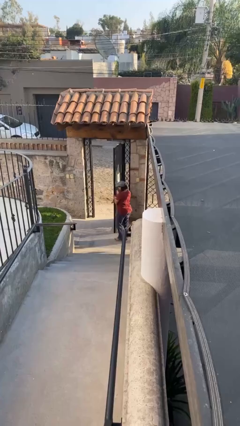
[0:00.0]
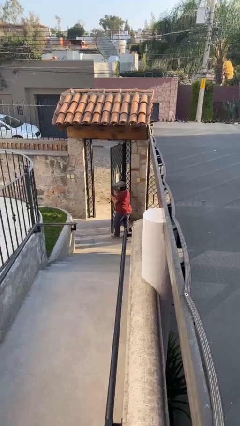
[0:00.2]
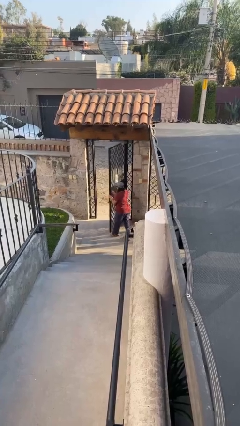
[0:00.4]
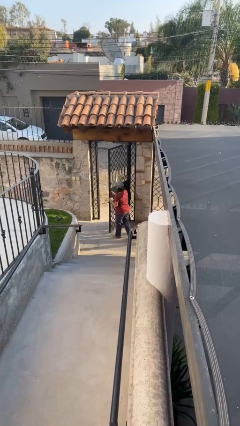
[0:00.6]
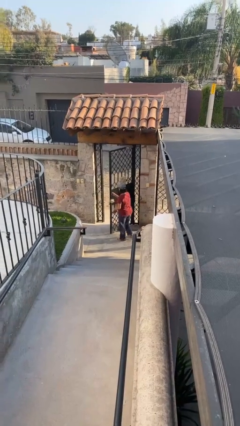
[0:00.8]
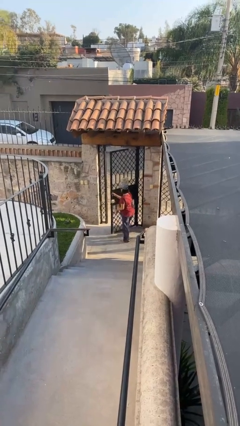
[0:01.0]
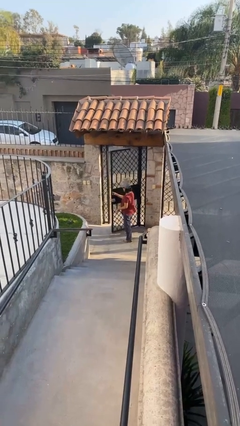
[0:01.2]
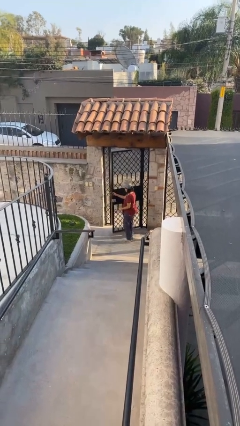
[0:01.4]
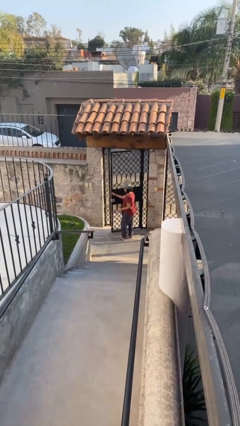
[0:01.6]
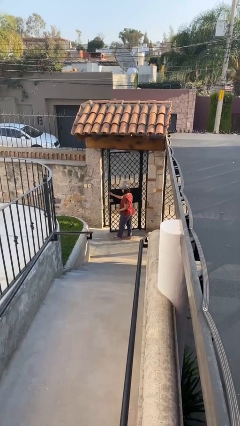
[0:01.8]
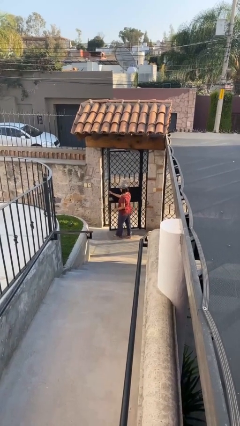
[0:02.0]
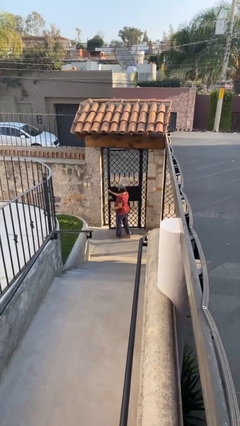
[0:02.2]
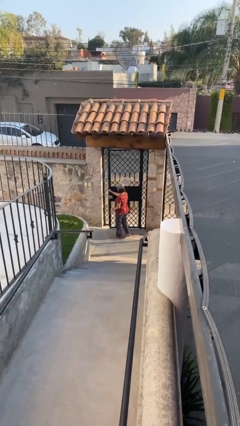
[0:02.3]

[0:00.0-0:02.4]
person closes facility door

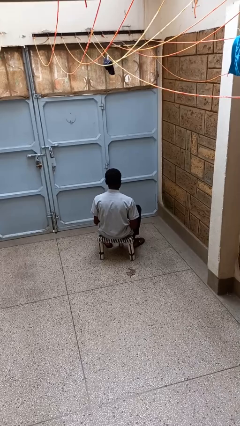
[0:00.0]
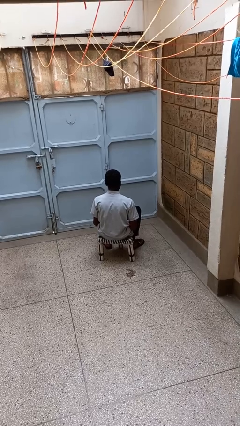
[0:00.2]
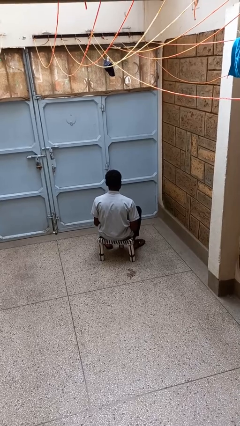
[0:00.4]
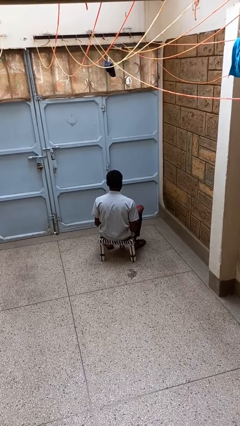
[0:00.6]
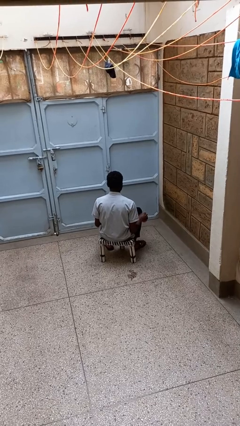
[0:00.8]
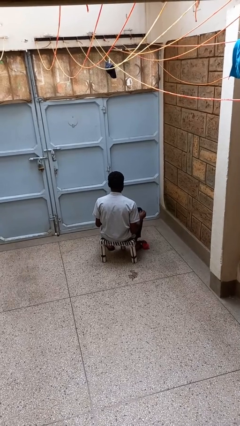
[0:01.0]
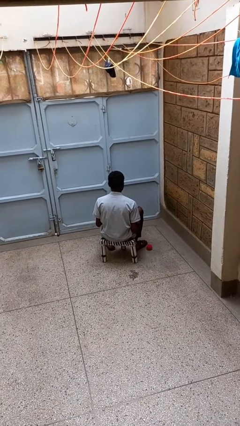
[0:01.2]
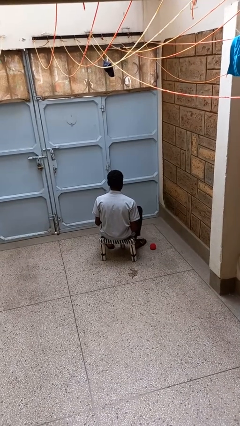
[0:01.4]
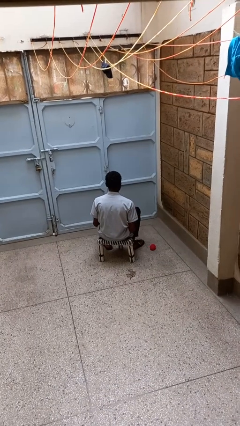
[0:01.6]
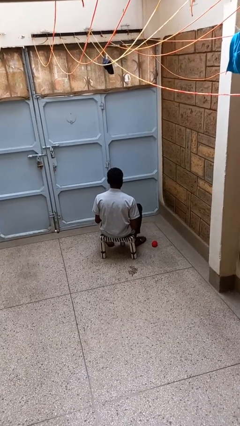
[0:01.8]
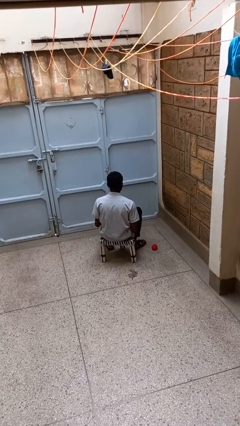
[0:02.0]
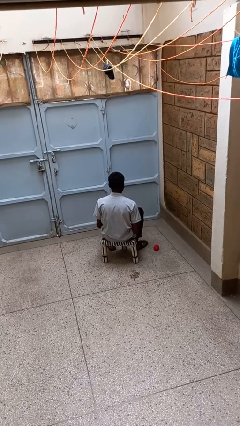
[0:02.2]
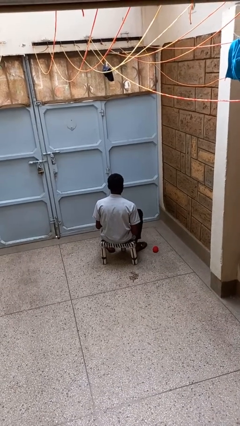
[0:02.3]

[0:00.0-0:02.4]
person drops object

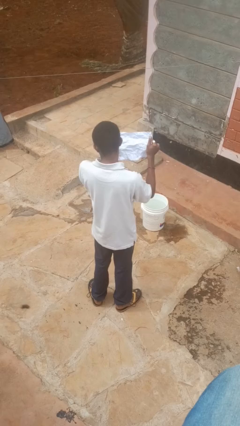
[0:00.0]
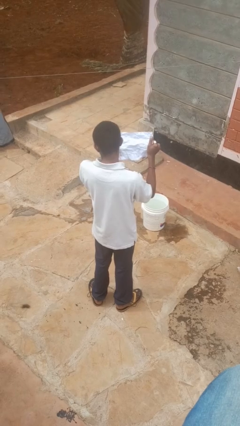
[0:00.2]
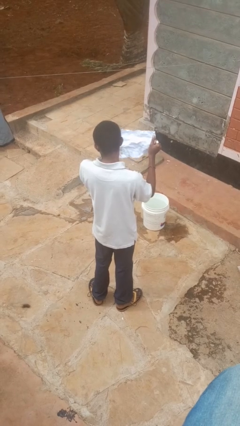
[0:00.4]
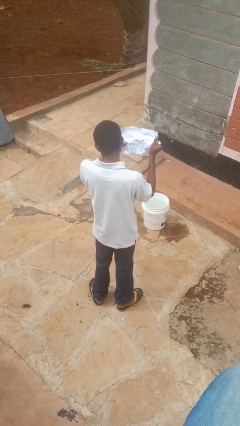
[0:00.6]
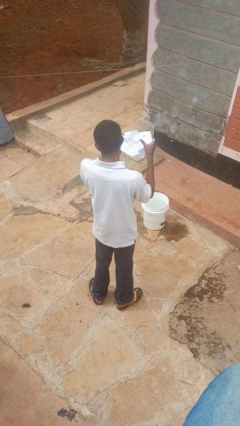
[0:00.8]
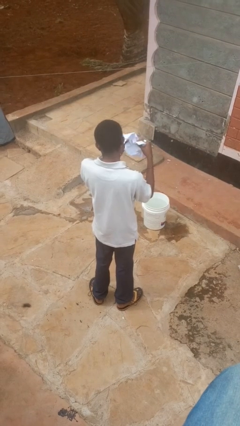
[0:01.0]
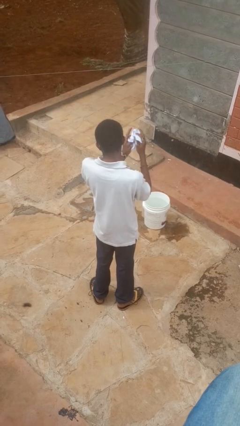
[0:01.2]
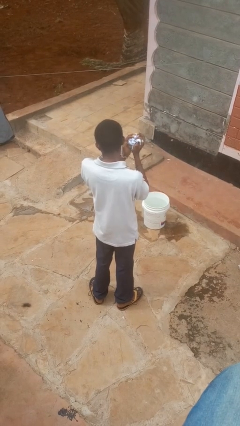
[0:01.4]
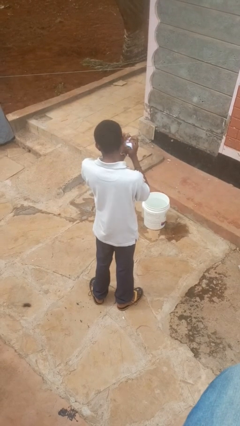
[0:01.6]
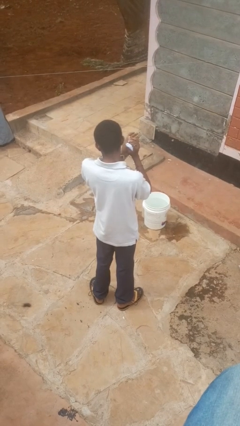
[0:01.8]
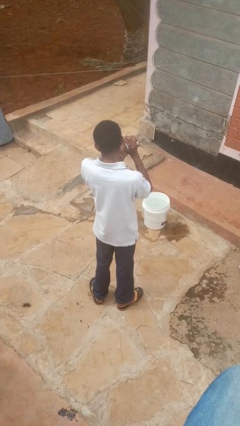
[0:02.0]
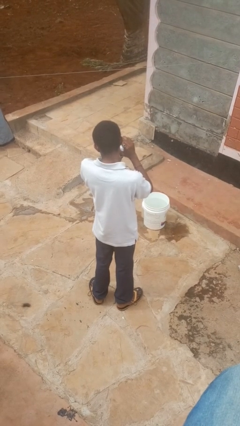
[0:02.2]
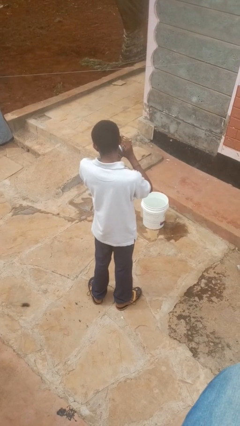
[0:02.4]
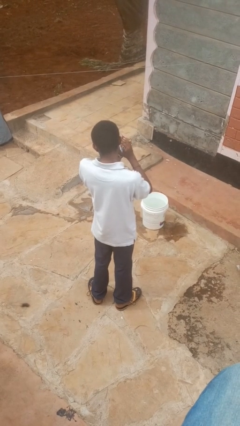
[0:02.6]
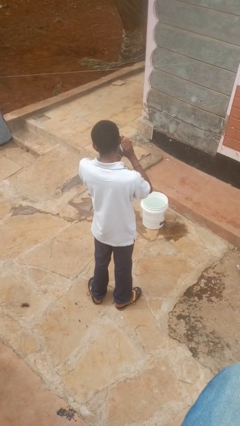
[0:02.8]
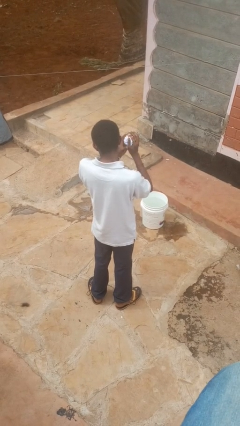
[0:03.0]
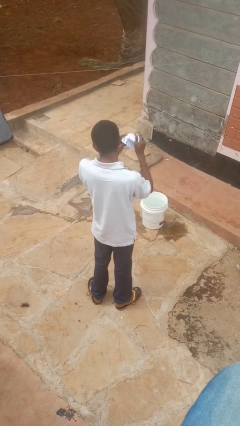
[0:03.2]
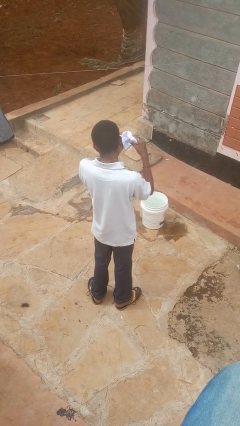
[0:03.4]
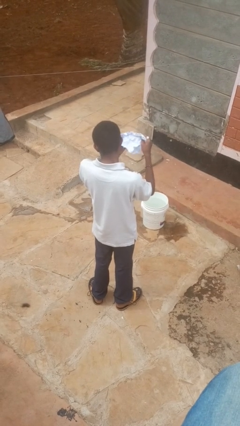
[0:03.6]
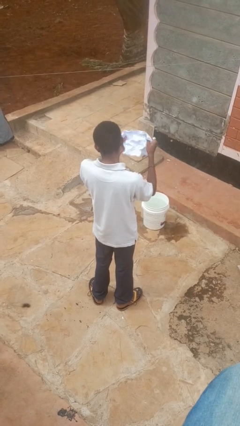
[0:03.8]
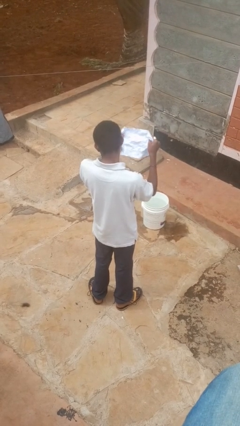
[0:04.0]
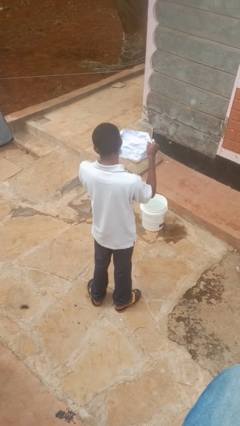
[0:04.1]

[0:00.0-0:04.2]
person crumples paper

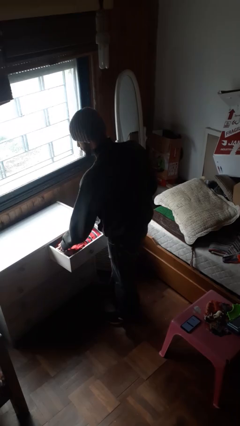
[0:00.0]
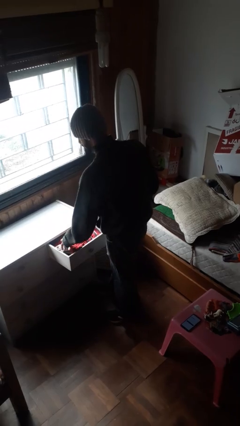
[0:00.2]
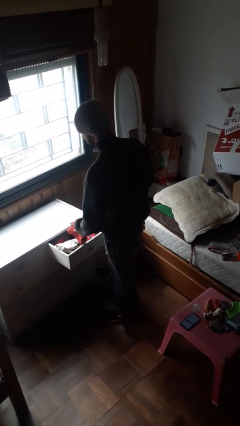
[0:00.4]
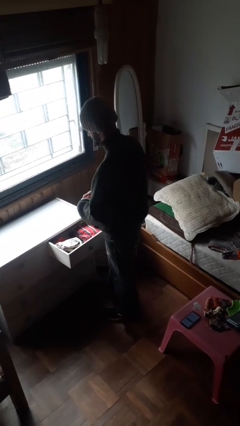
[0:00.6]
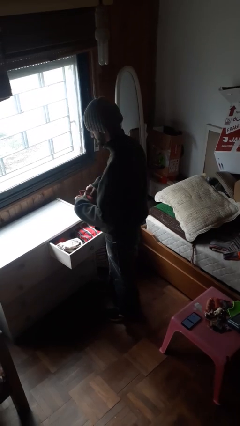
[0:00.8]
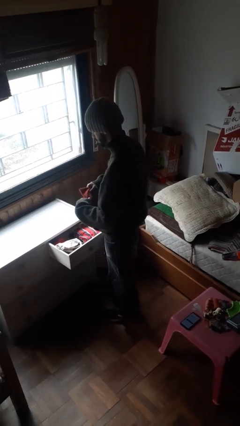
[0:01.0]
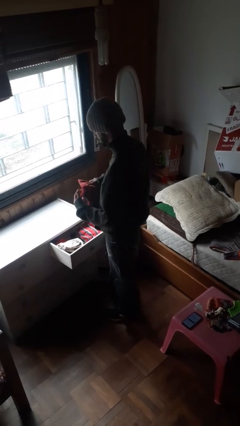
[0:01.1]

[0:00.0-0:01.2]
person takes clothes from dresser

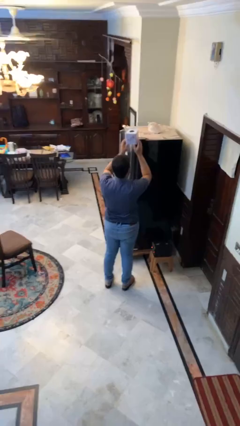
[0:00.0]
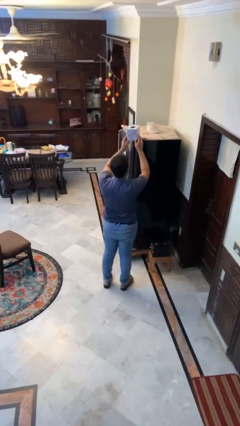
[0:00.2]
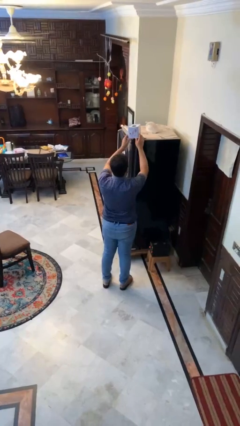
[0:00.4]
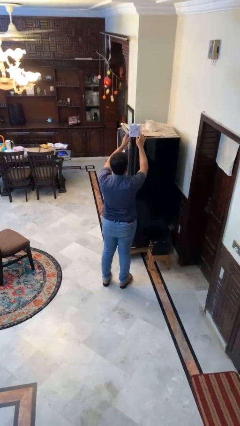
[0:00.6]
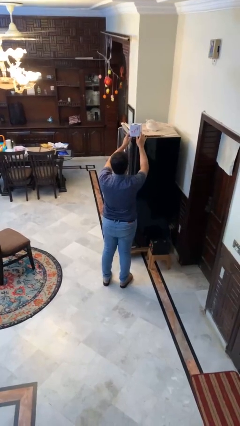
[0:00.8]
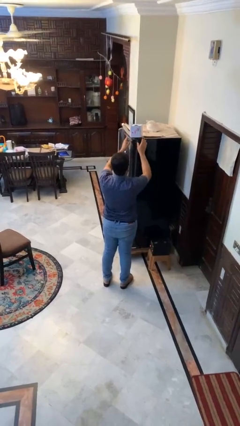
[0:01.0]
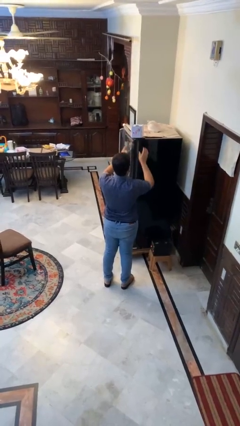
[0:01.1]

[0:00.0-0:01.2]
person puts down object on shelf

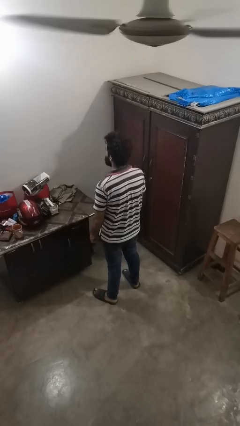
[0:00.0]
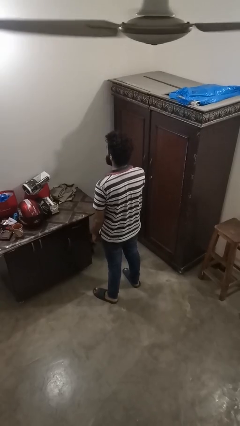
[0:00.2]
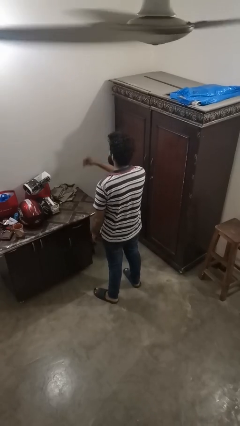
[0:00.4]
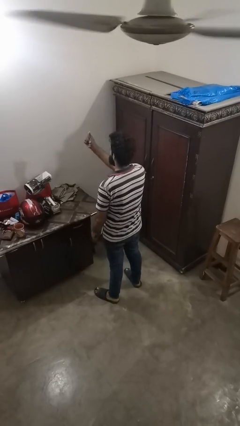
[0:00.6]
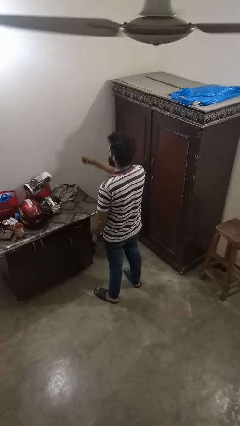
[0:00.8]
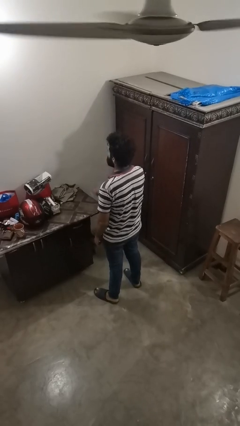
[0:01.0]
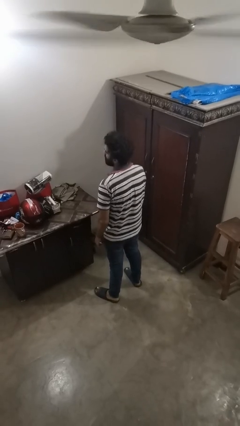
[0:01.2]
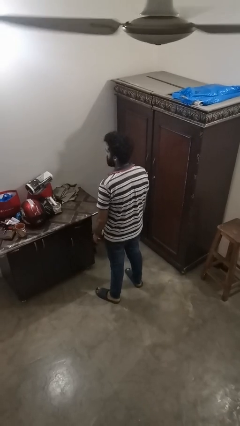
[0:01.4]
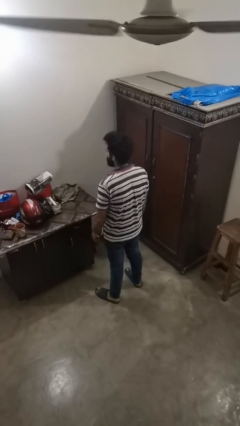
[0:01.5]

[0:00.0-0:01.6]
person snaps fingers

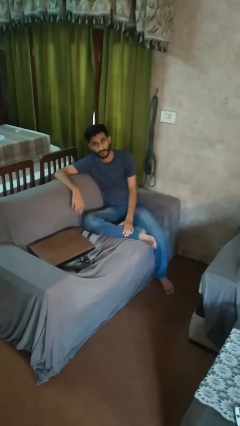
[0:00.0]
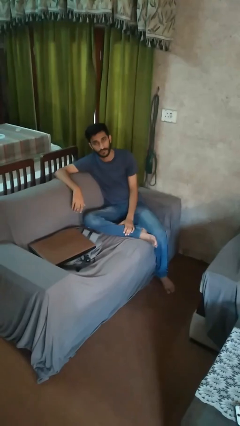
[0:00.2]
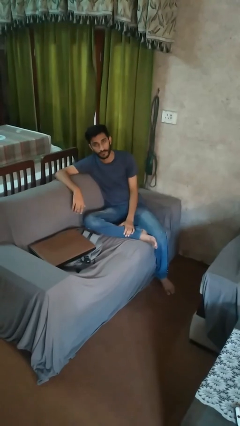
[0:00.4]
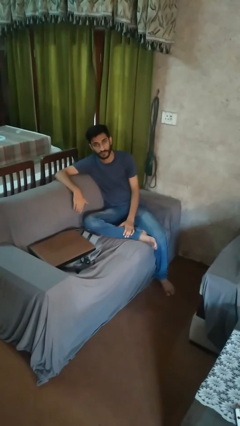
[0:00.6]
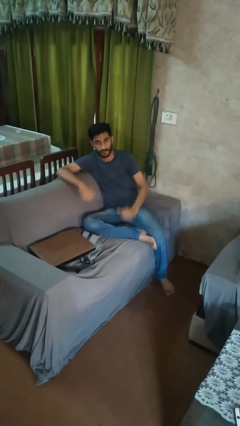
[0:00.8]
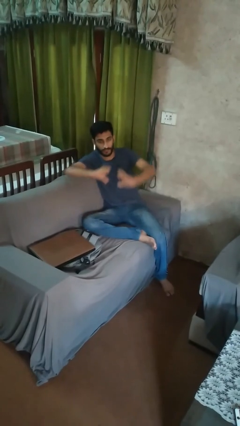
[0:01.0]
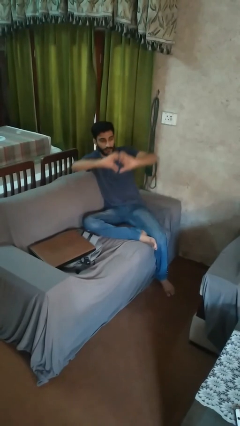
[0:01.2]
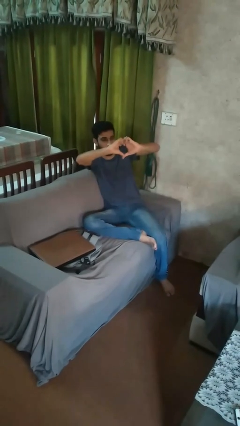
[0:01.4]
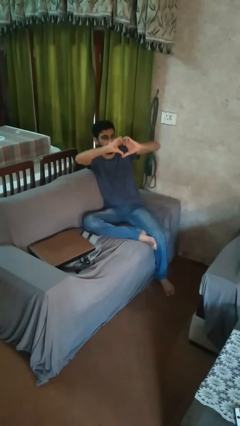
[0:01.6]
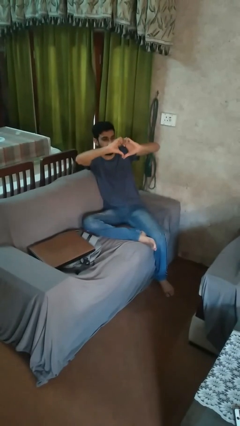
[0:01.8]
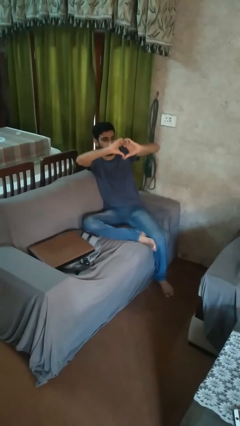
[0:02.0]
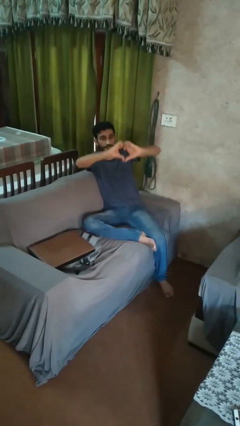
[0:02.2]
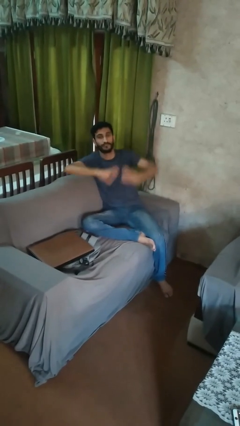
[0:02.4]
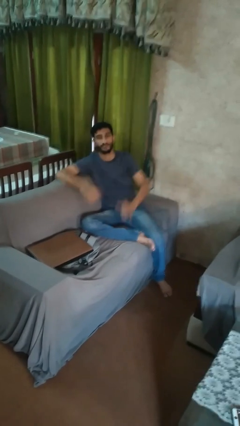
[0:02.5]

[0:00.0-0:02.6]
person gestures heart

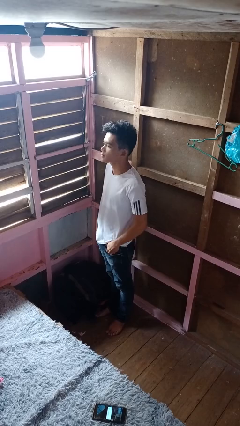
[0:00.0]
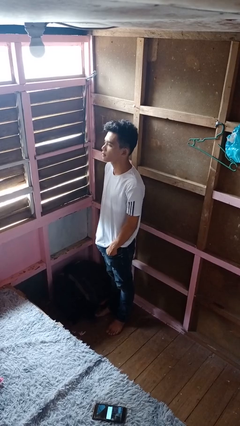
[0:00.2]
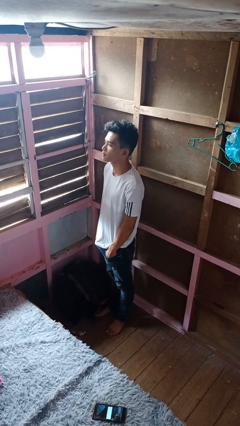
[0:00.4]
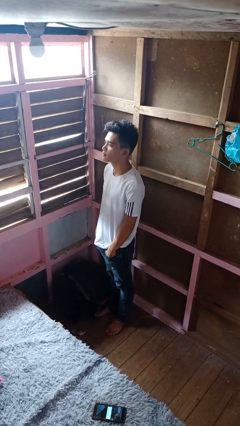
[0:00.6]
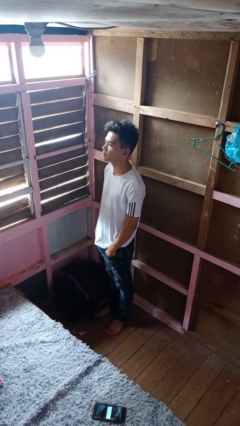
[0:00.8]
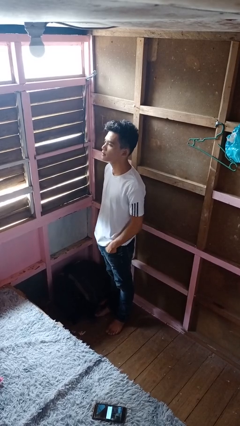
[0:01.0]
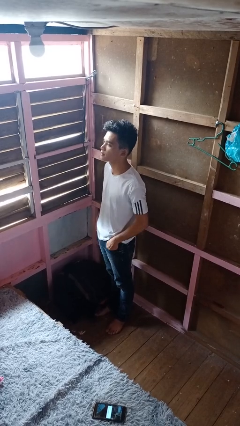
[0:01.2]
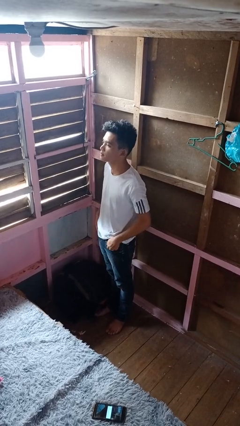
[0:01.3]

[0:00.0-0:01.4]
person puts hands in back pockets
